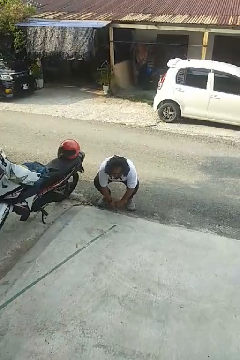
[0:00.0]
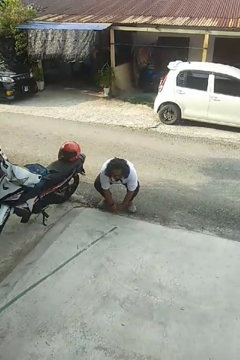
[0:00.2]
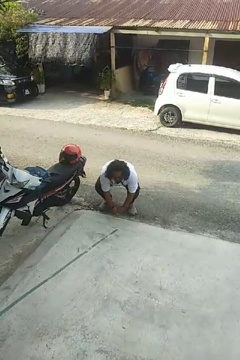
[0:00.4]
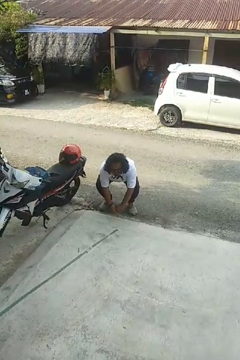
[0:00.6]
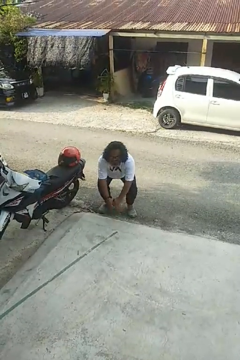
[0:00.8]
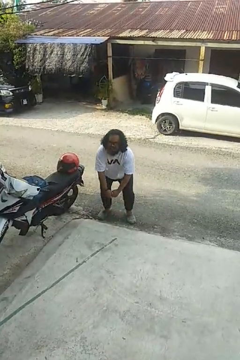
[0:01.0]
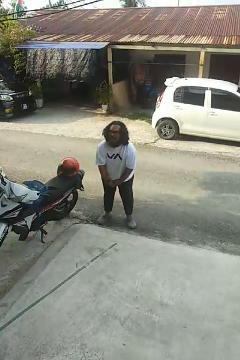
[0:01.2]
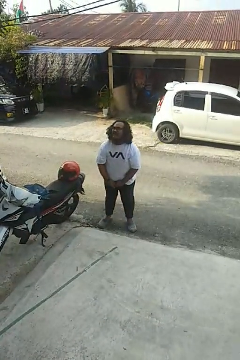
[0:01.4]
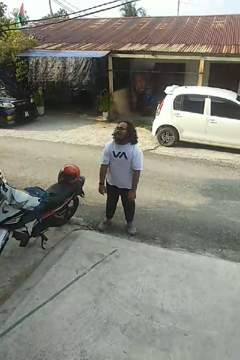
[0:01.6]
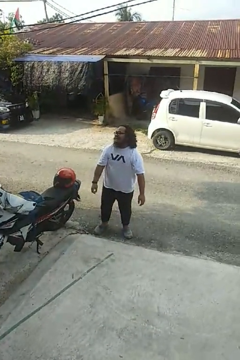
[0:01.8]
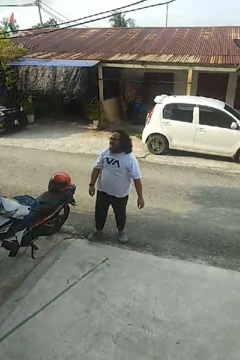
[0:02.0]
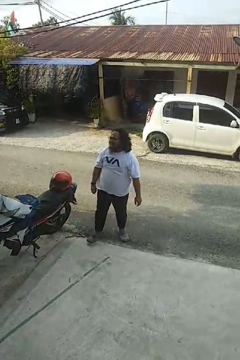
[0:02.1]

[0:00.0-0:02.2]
person stands up

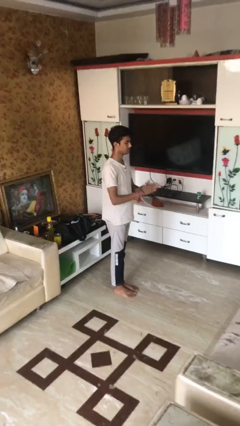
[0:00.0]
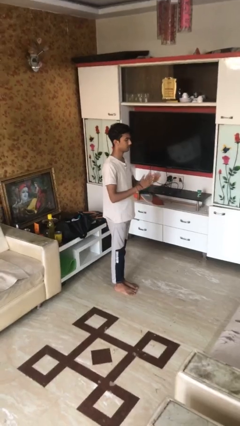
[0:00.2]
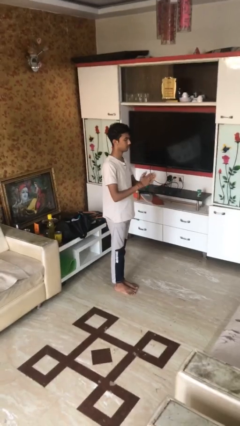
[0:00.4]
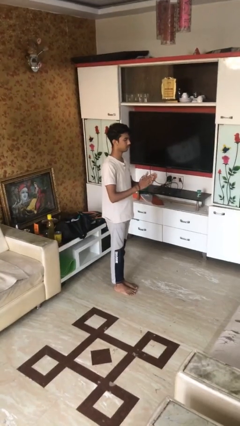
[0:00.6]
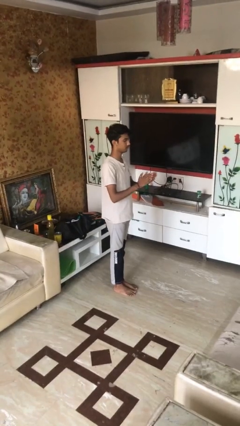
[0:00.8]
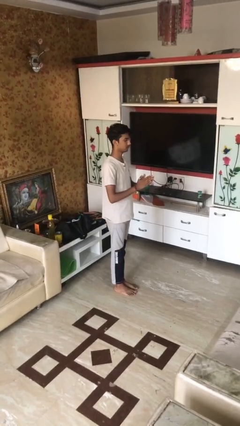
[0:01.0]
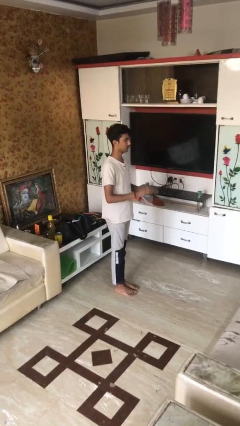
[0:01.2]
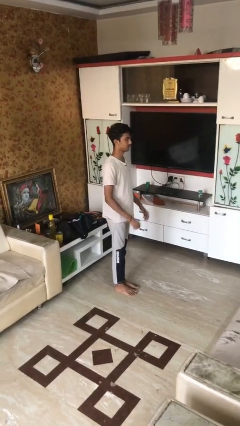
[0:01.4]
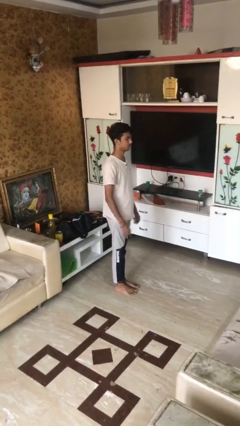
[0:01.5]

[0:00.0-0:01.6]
person claps hands

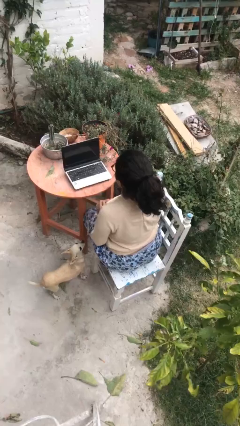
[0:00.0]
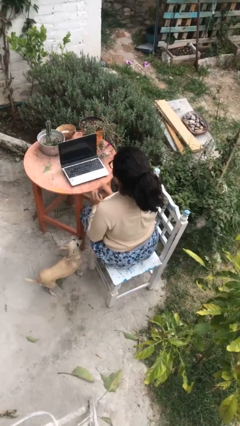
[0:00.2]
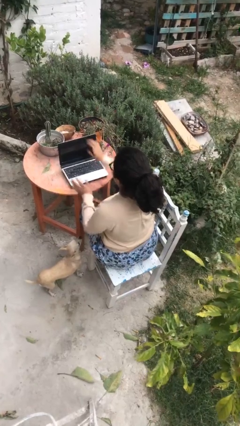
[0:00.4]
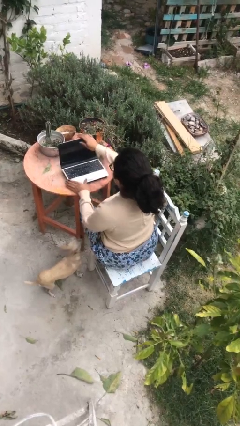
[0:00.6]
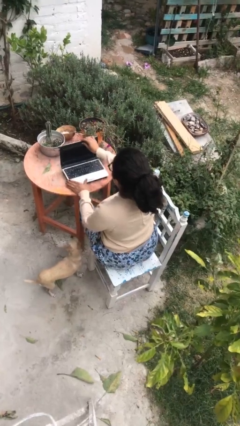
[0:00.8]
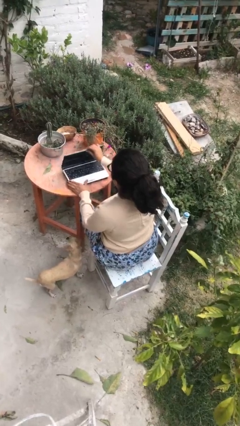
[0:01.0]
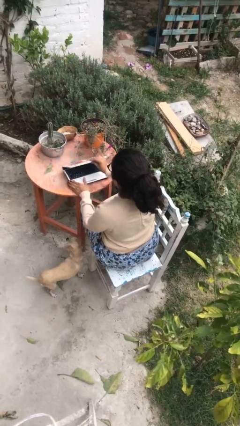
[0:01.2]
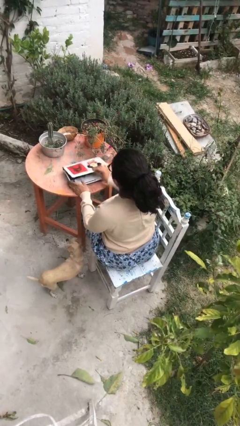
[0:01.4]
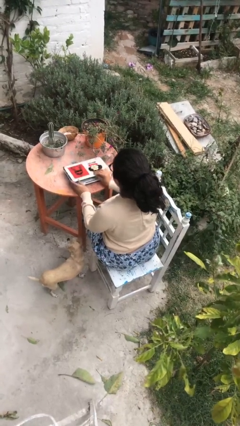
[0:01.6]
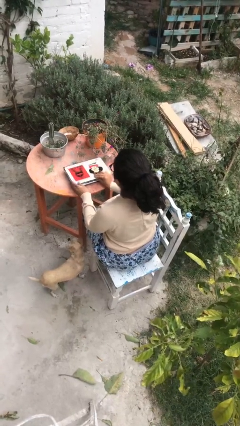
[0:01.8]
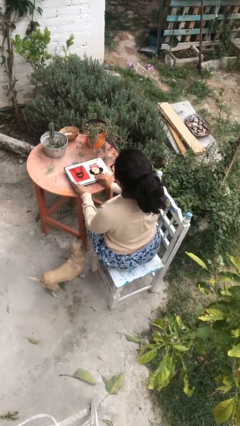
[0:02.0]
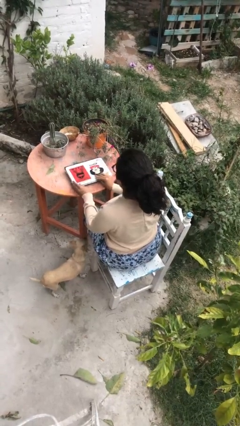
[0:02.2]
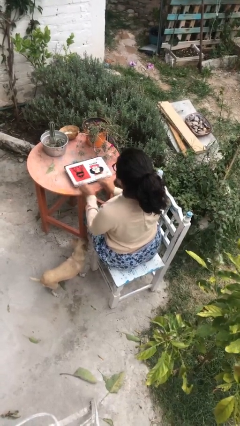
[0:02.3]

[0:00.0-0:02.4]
person closes laptop

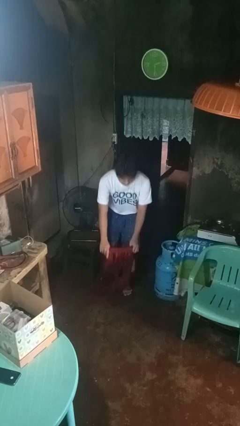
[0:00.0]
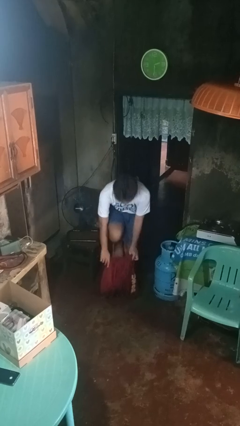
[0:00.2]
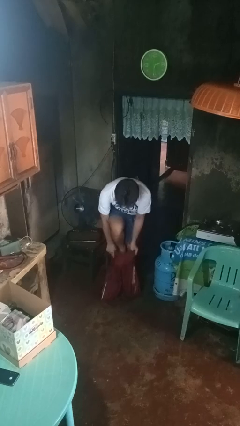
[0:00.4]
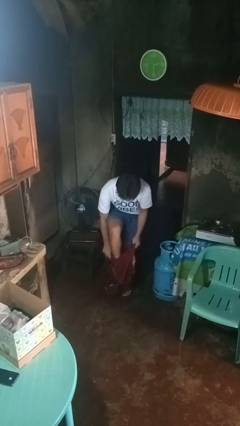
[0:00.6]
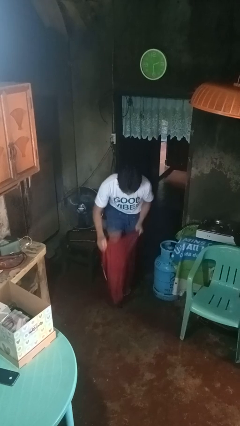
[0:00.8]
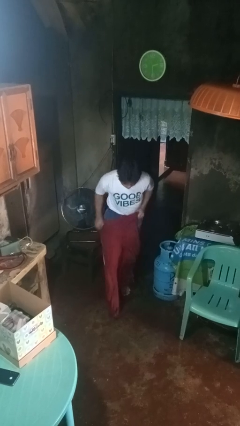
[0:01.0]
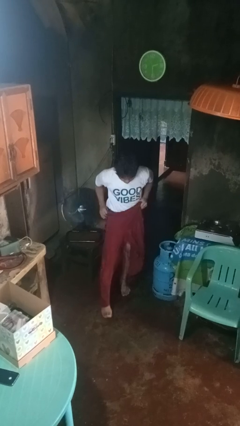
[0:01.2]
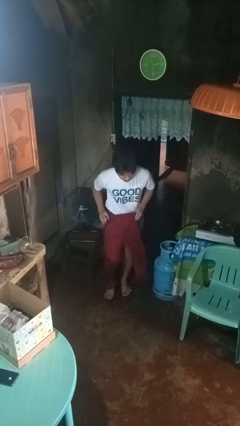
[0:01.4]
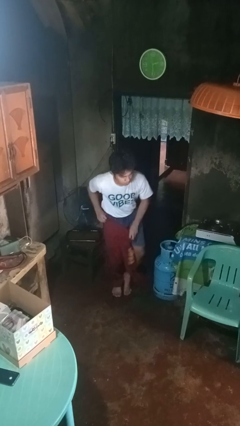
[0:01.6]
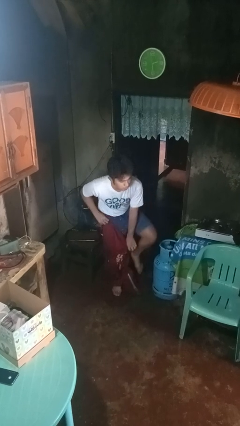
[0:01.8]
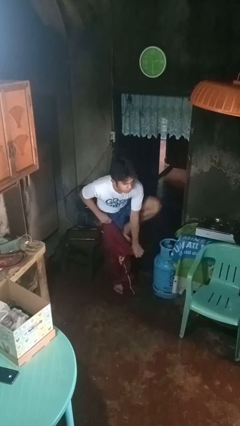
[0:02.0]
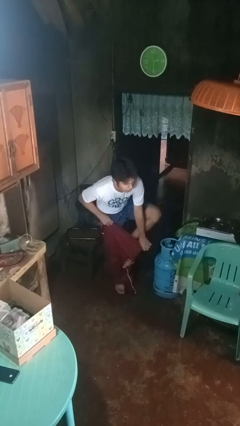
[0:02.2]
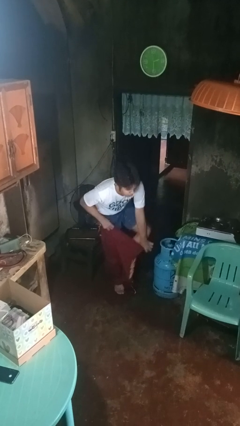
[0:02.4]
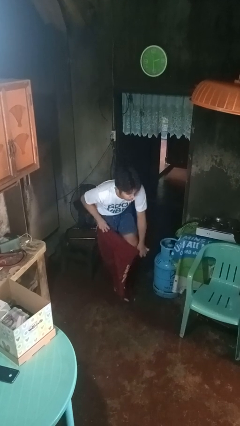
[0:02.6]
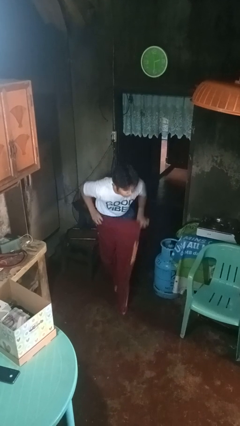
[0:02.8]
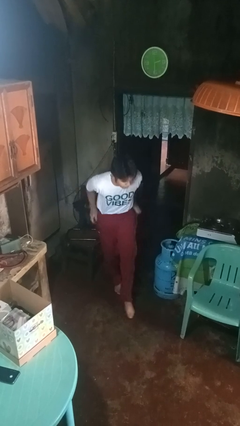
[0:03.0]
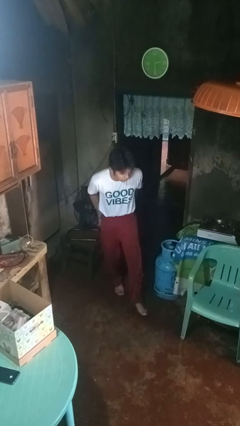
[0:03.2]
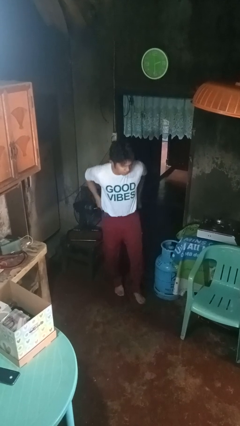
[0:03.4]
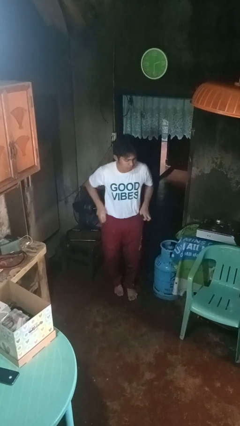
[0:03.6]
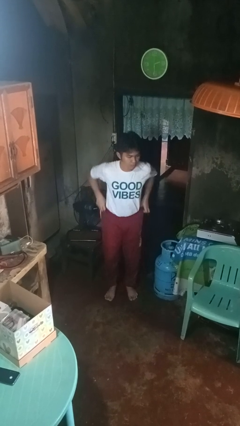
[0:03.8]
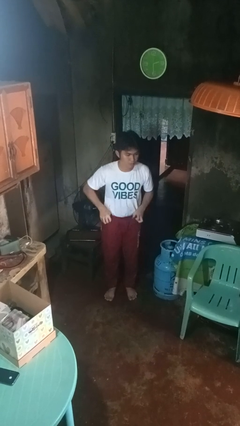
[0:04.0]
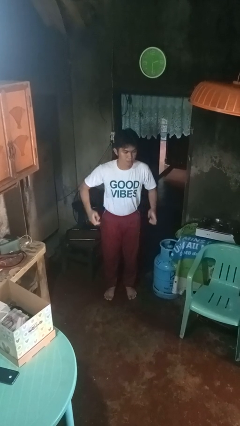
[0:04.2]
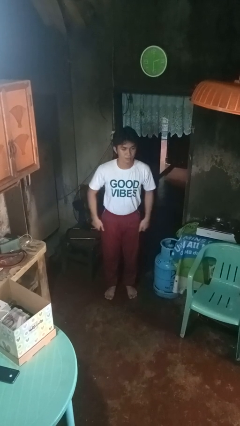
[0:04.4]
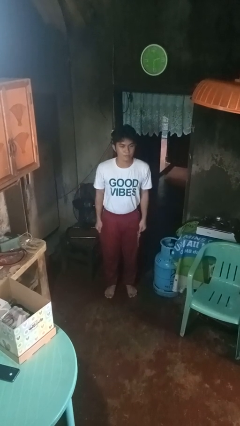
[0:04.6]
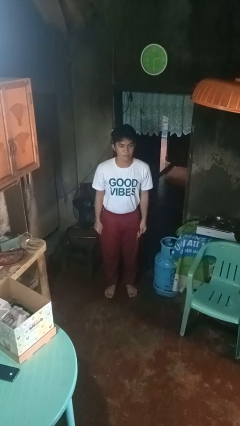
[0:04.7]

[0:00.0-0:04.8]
person puts on pants

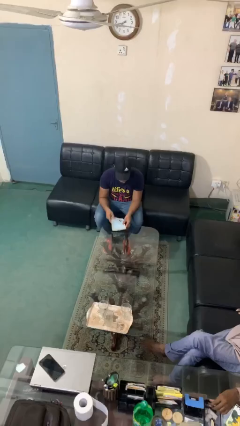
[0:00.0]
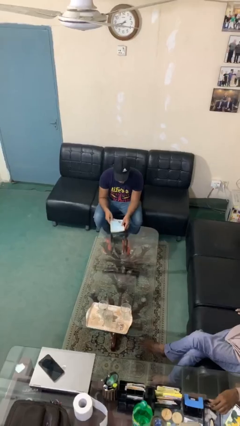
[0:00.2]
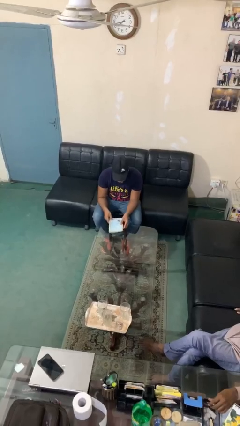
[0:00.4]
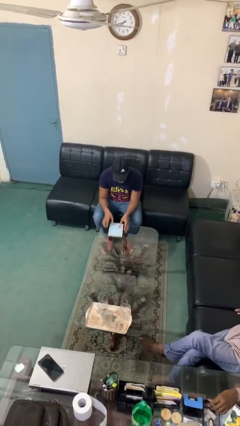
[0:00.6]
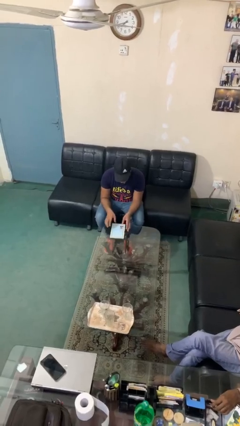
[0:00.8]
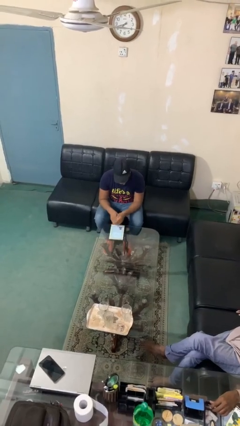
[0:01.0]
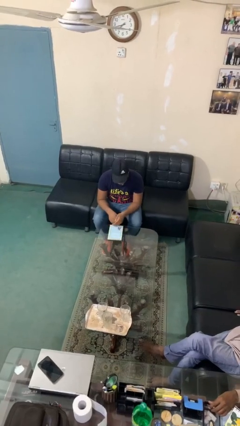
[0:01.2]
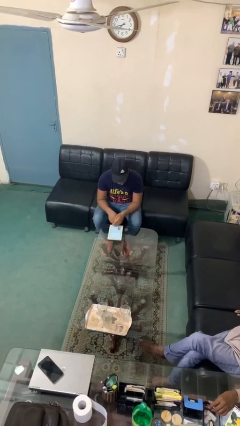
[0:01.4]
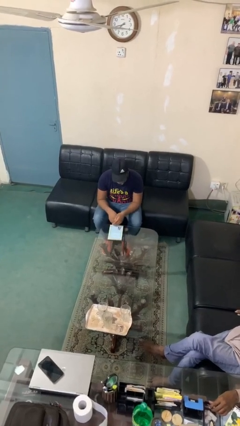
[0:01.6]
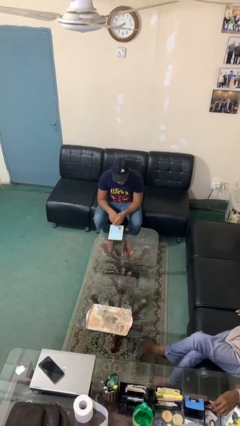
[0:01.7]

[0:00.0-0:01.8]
person puts down object on table

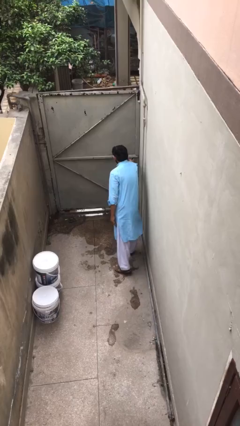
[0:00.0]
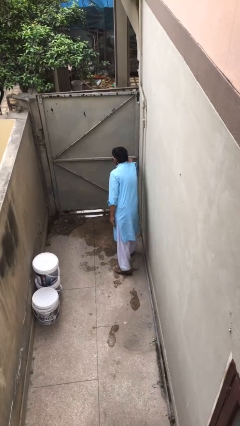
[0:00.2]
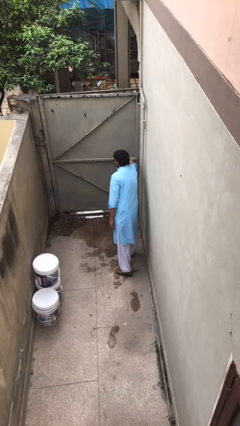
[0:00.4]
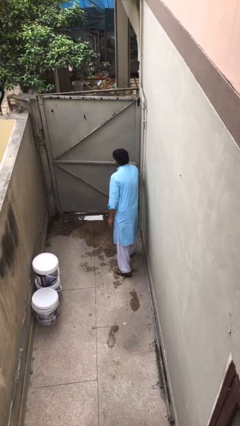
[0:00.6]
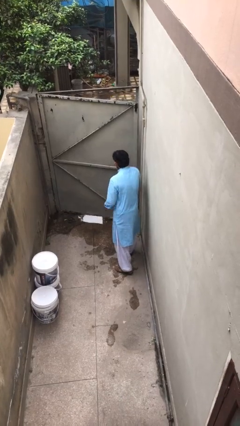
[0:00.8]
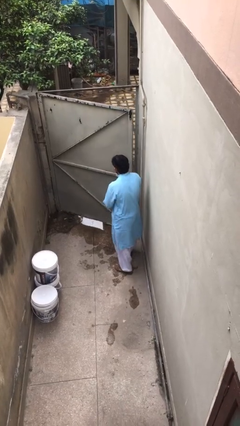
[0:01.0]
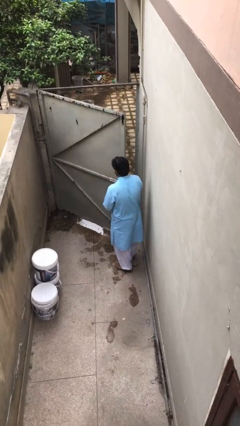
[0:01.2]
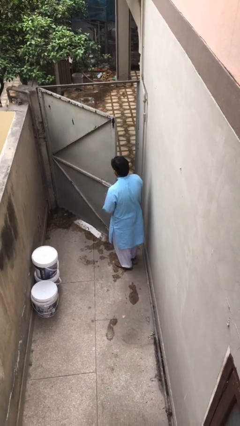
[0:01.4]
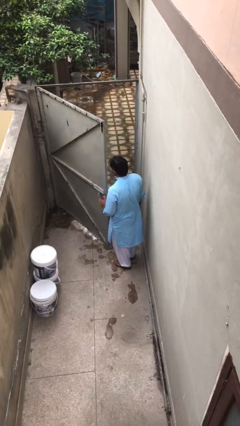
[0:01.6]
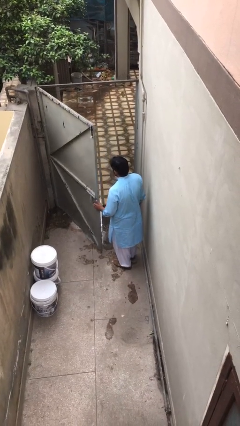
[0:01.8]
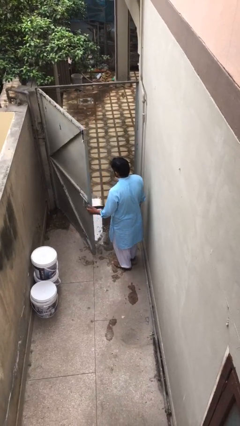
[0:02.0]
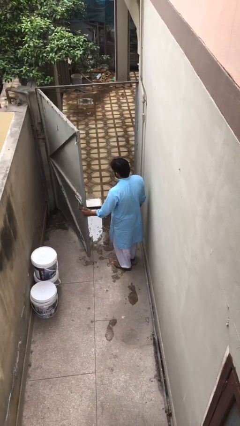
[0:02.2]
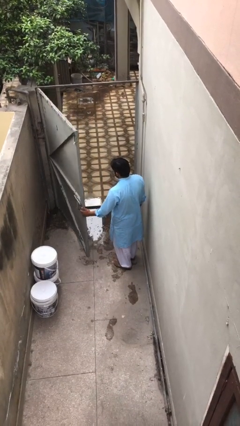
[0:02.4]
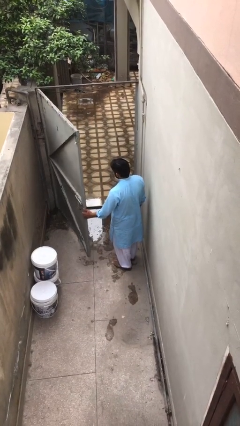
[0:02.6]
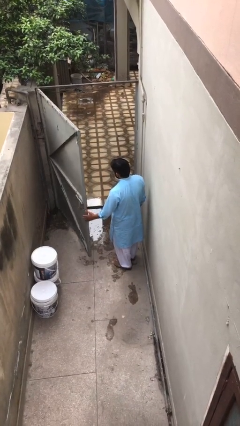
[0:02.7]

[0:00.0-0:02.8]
person opens facility door

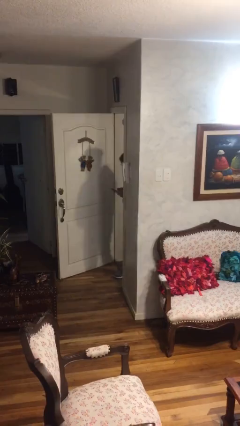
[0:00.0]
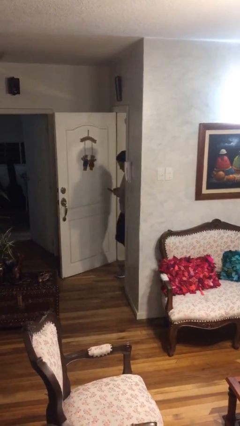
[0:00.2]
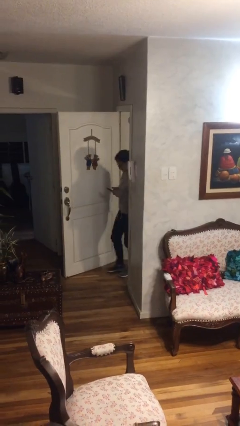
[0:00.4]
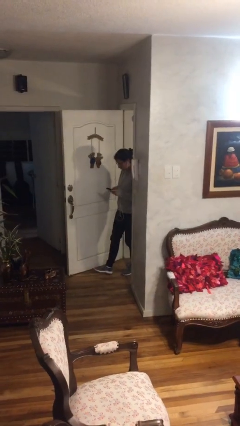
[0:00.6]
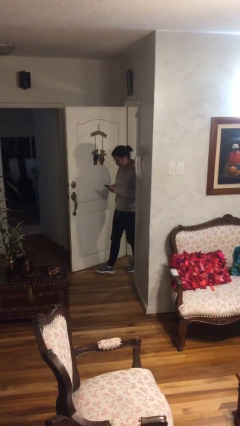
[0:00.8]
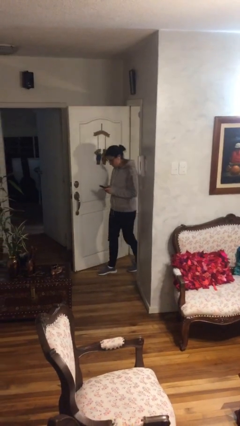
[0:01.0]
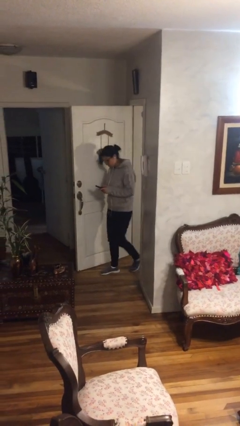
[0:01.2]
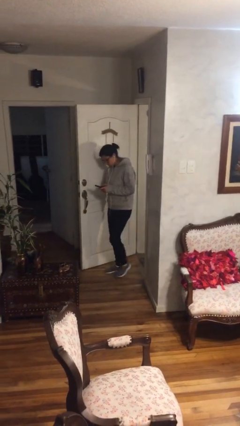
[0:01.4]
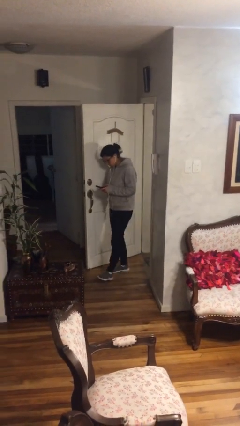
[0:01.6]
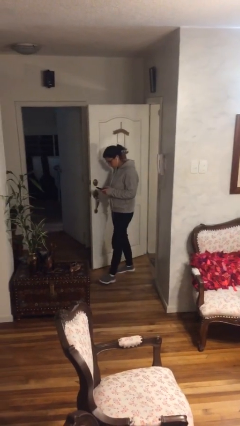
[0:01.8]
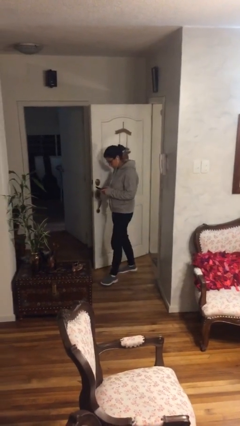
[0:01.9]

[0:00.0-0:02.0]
person enters scene through structure
